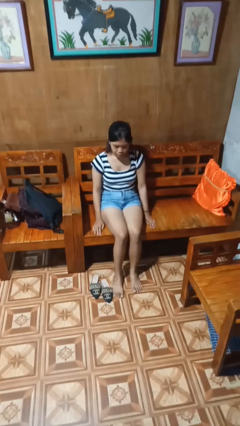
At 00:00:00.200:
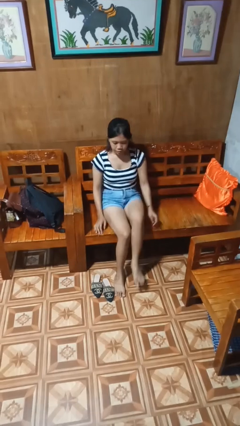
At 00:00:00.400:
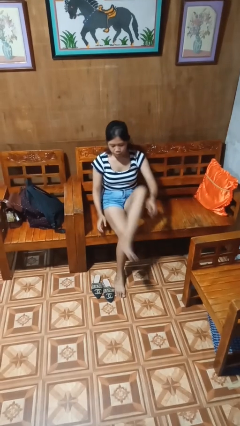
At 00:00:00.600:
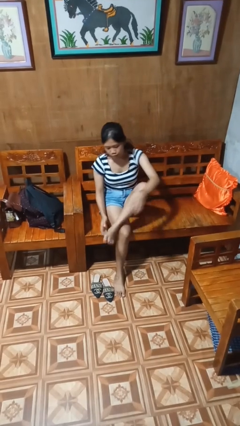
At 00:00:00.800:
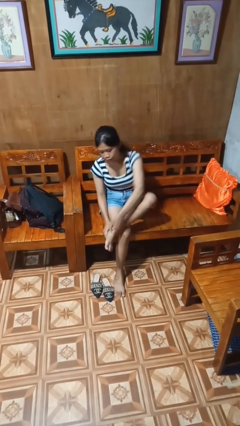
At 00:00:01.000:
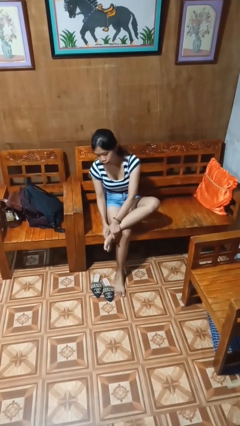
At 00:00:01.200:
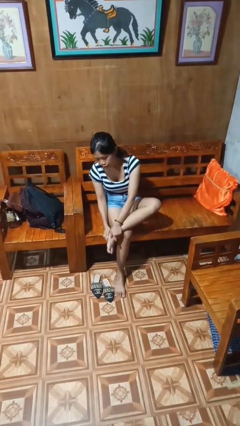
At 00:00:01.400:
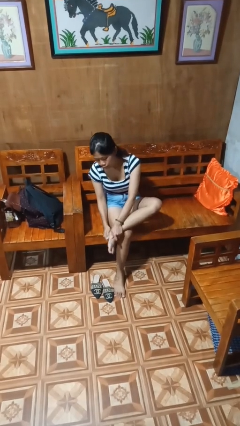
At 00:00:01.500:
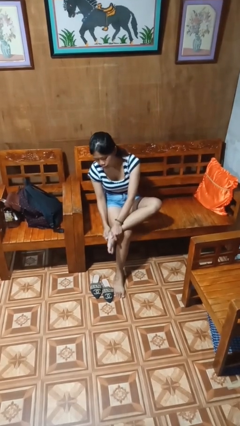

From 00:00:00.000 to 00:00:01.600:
person rubs foot

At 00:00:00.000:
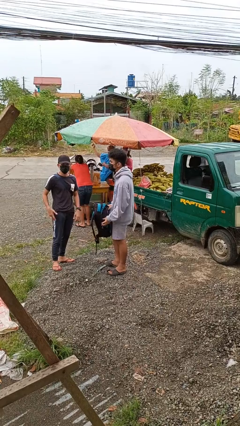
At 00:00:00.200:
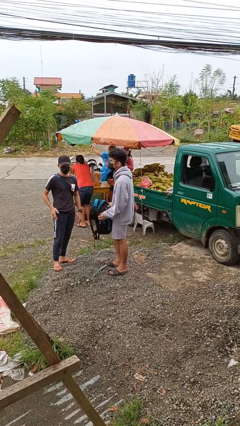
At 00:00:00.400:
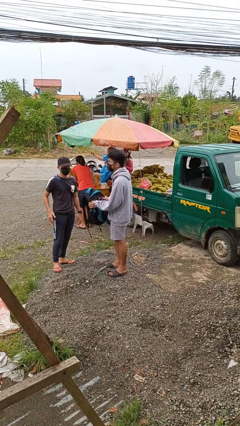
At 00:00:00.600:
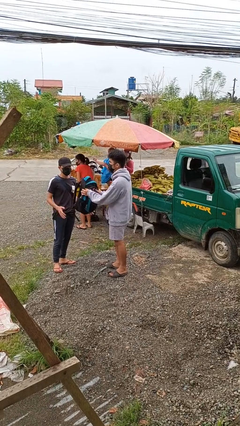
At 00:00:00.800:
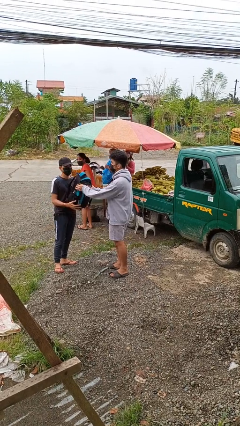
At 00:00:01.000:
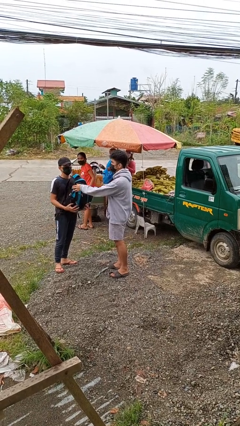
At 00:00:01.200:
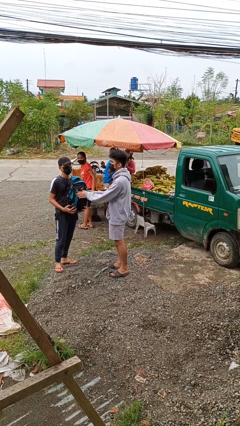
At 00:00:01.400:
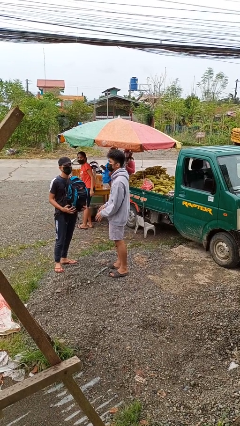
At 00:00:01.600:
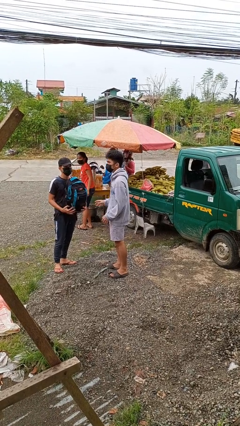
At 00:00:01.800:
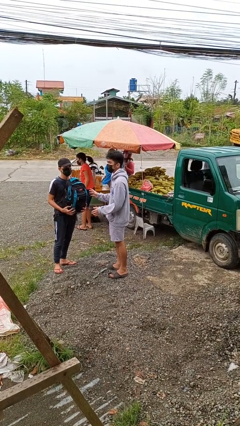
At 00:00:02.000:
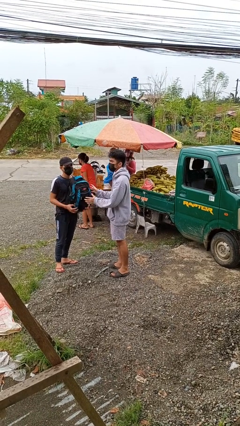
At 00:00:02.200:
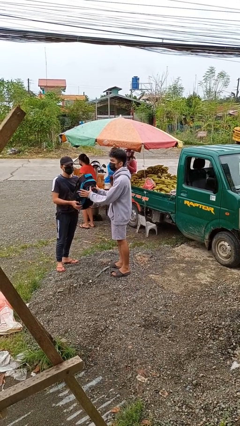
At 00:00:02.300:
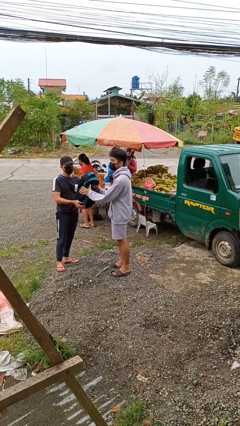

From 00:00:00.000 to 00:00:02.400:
person transfers object to person

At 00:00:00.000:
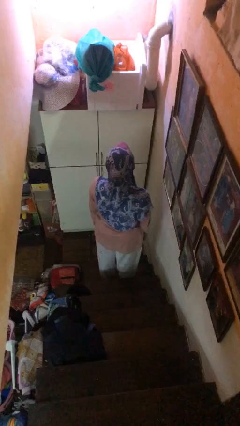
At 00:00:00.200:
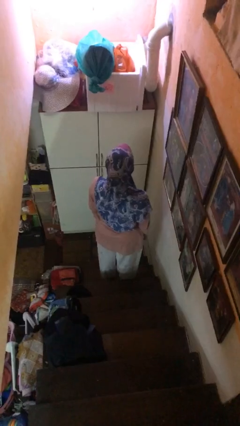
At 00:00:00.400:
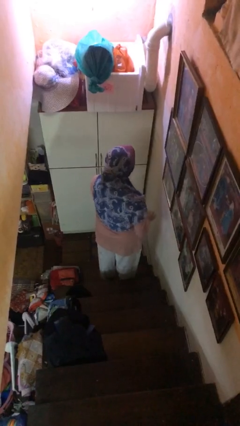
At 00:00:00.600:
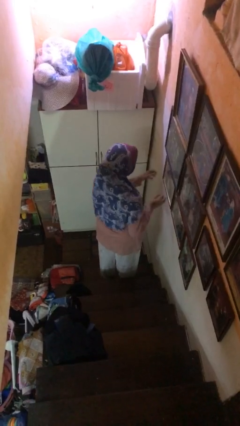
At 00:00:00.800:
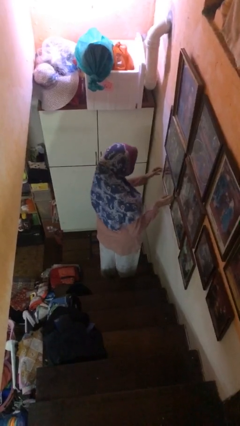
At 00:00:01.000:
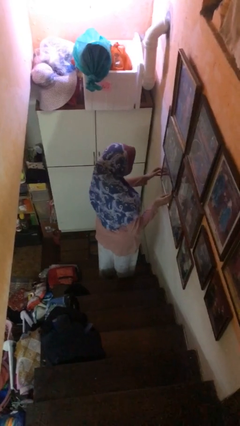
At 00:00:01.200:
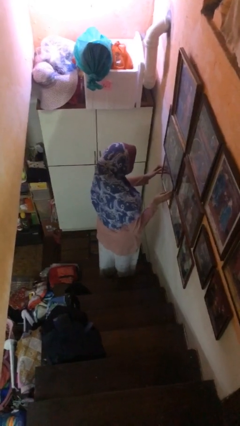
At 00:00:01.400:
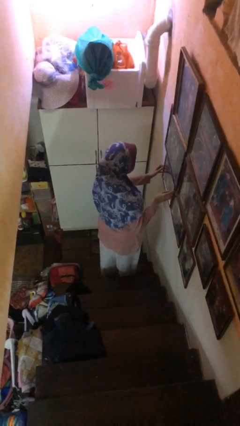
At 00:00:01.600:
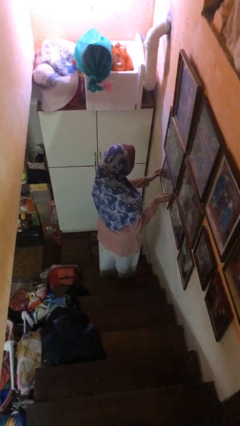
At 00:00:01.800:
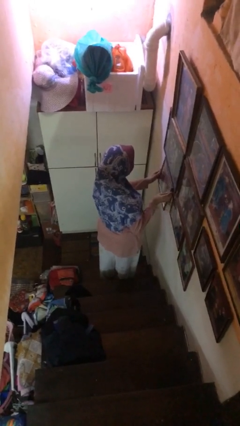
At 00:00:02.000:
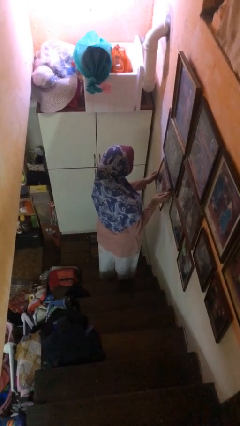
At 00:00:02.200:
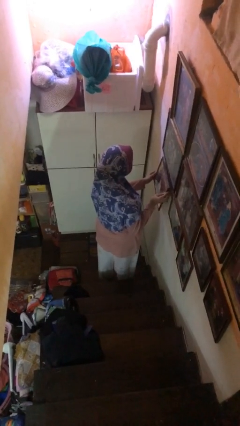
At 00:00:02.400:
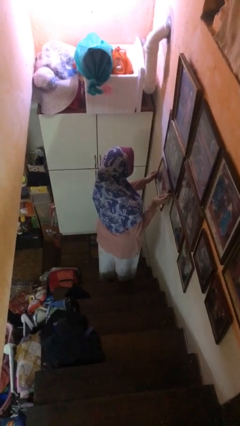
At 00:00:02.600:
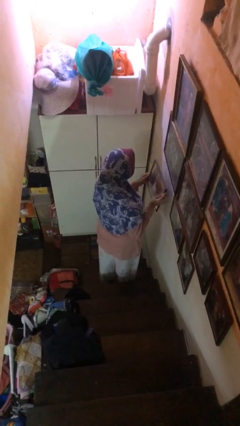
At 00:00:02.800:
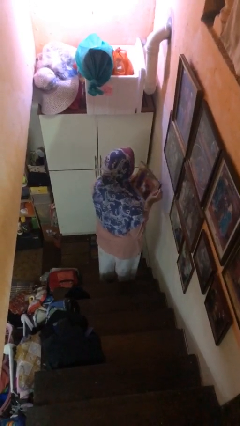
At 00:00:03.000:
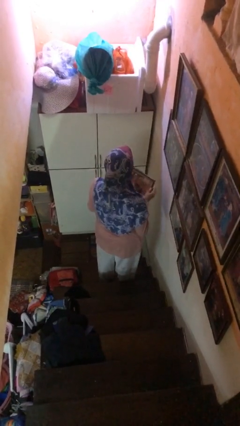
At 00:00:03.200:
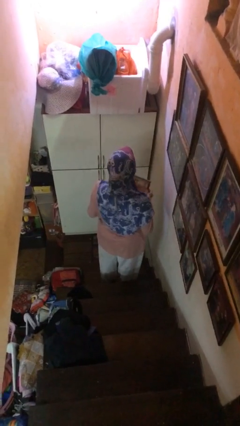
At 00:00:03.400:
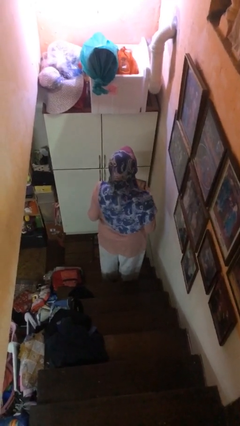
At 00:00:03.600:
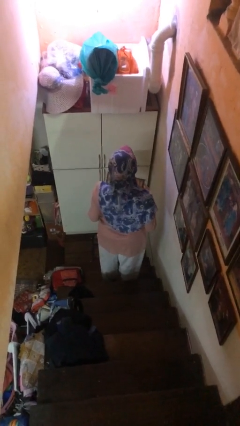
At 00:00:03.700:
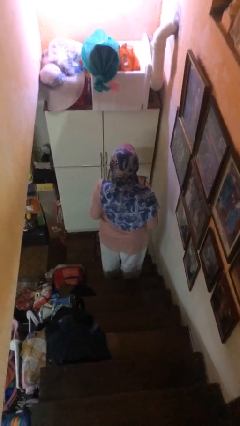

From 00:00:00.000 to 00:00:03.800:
person puts up picture frame

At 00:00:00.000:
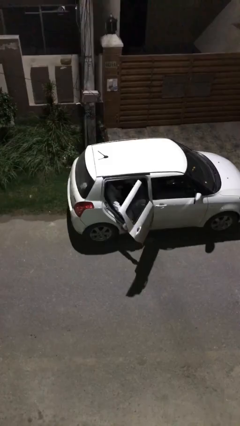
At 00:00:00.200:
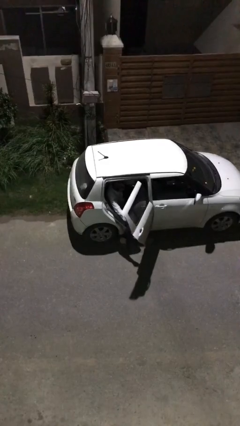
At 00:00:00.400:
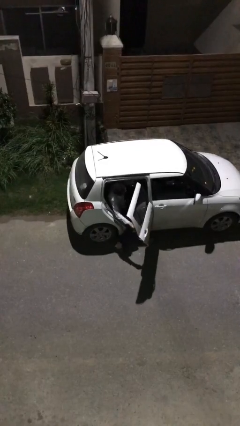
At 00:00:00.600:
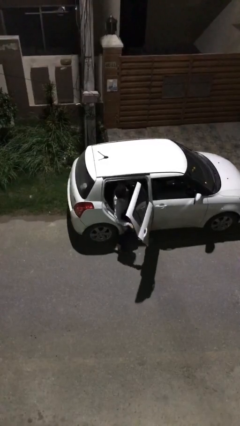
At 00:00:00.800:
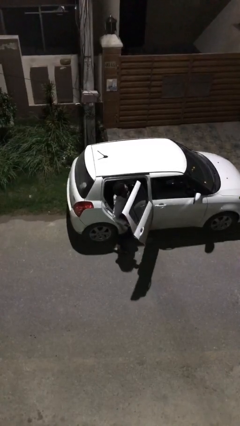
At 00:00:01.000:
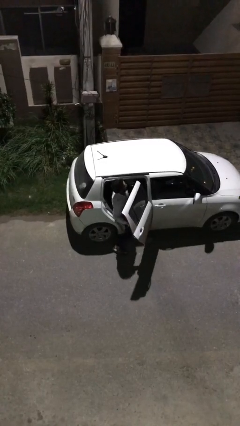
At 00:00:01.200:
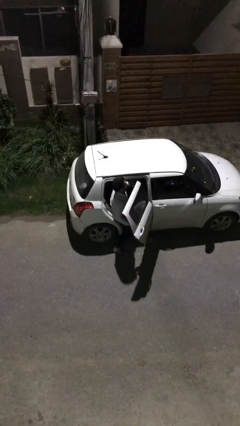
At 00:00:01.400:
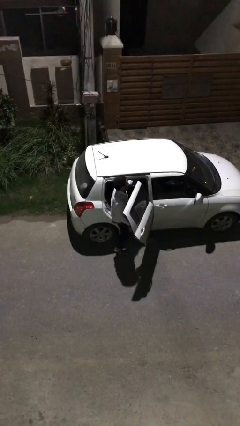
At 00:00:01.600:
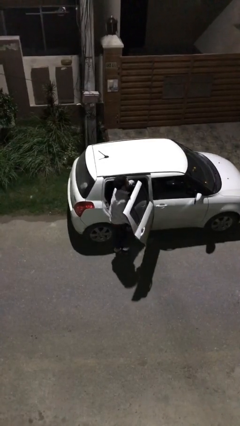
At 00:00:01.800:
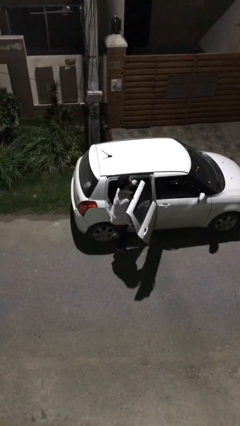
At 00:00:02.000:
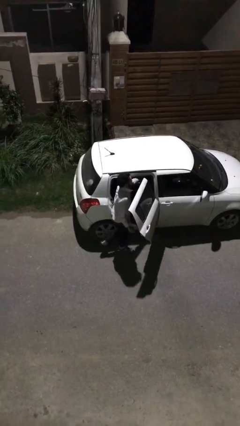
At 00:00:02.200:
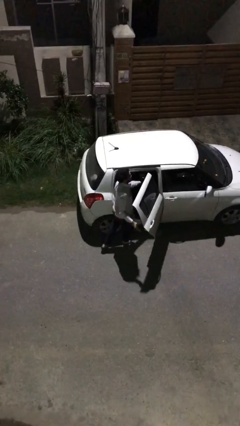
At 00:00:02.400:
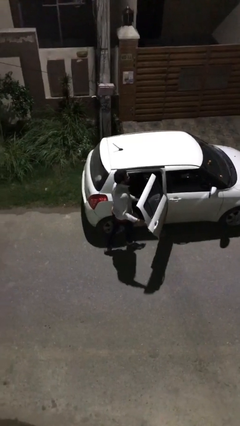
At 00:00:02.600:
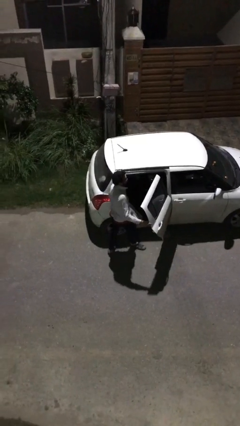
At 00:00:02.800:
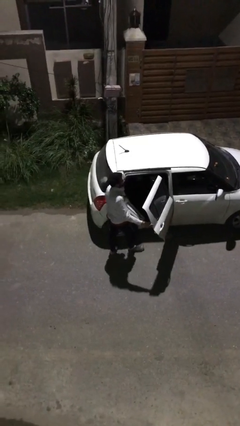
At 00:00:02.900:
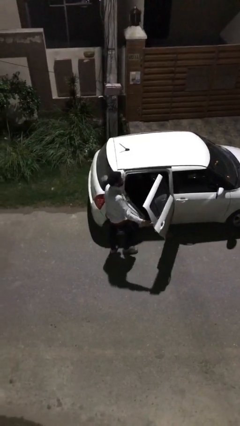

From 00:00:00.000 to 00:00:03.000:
person exits car

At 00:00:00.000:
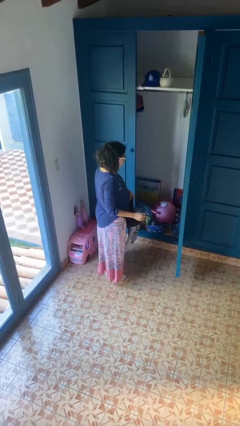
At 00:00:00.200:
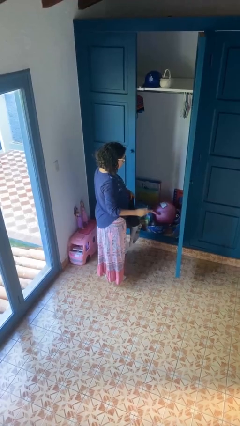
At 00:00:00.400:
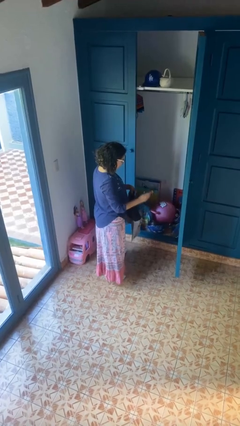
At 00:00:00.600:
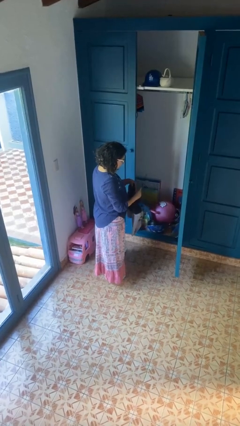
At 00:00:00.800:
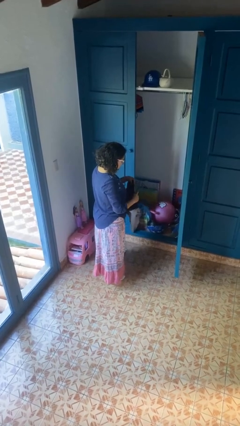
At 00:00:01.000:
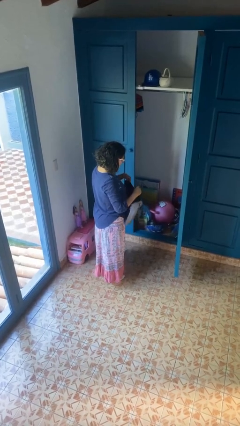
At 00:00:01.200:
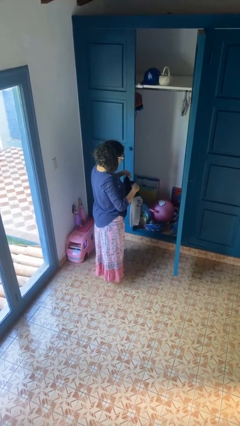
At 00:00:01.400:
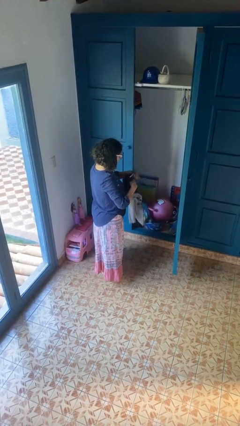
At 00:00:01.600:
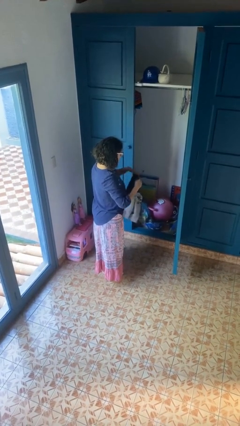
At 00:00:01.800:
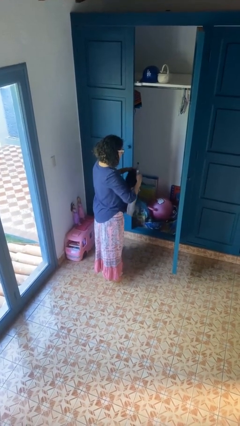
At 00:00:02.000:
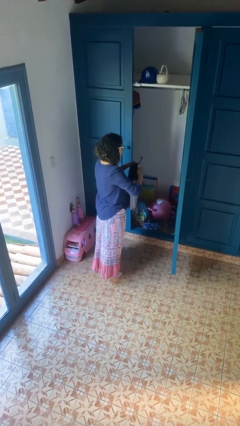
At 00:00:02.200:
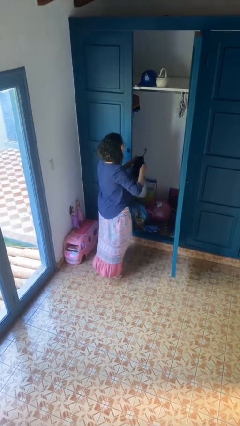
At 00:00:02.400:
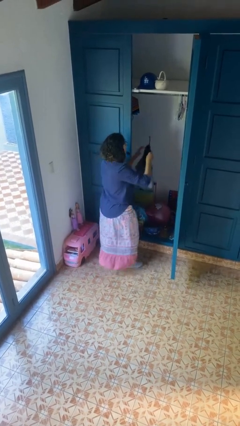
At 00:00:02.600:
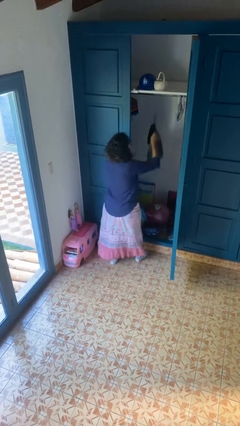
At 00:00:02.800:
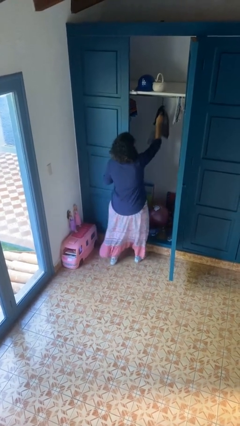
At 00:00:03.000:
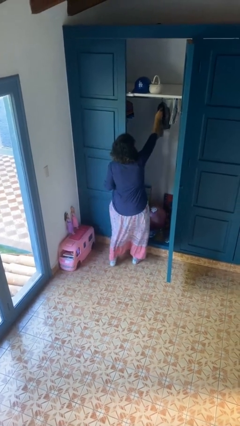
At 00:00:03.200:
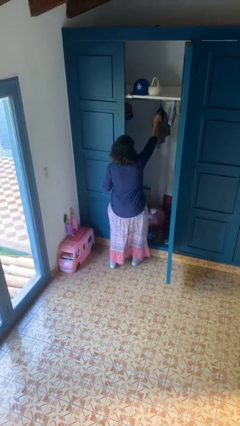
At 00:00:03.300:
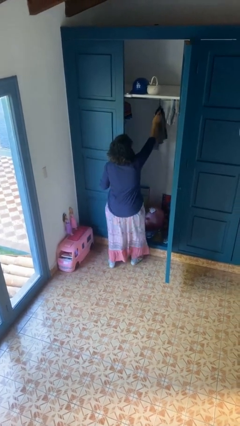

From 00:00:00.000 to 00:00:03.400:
person puts clothes into closet

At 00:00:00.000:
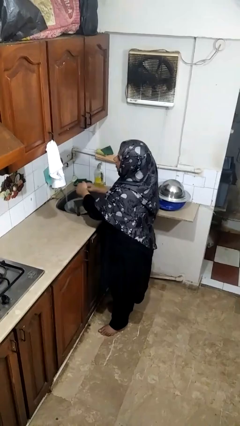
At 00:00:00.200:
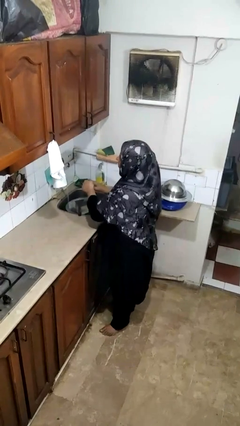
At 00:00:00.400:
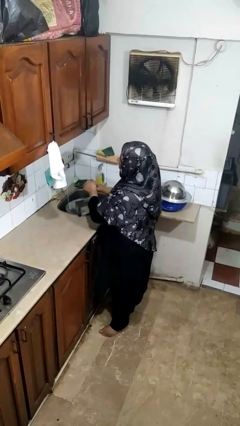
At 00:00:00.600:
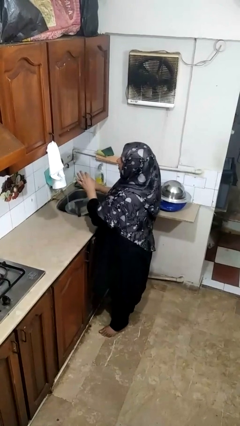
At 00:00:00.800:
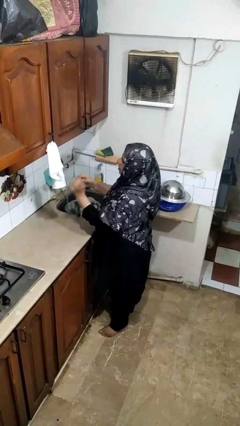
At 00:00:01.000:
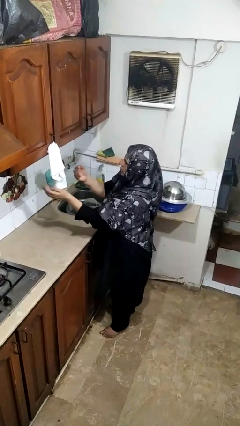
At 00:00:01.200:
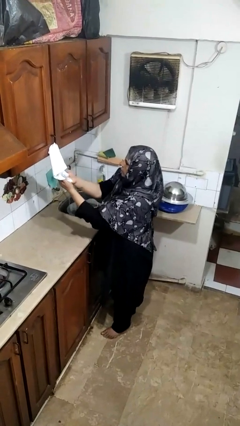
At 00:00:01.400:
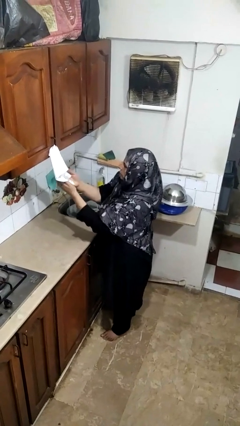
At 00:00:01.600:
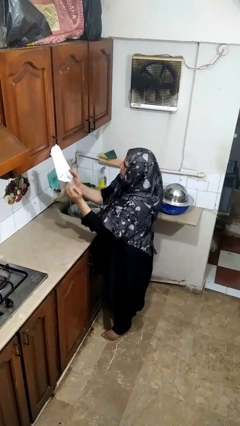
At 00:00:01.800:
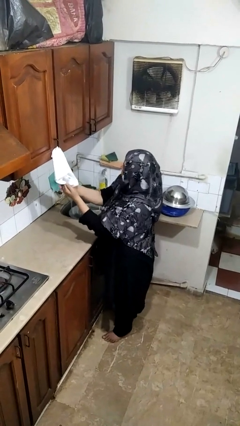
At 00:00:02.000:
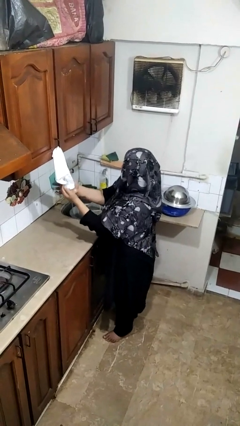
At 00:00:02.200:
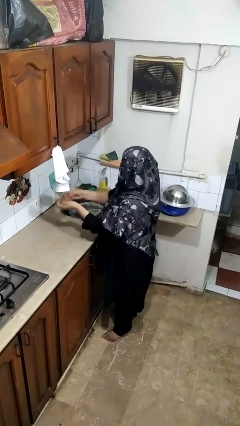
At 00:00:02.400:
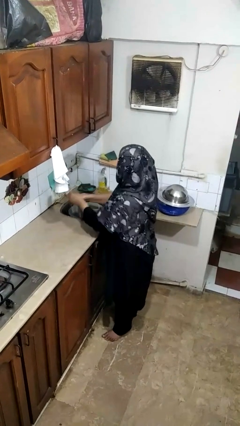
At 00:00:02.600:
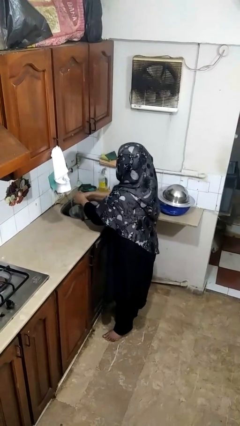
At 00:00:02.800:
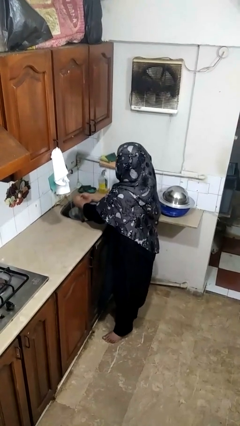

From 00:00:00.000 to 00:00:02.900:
person dries hands with towel
